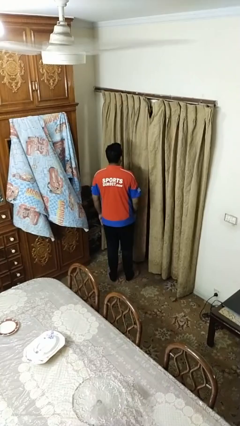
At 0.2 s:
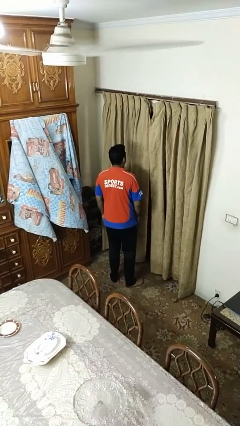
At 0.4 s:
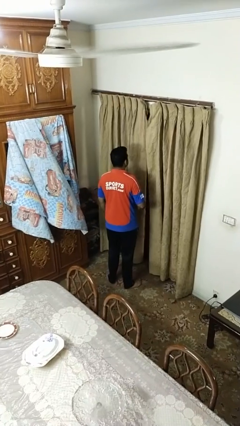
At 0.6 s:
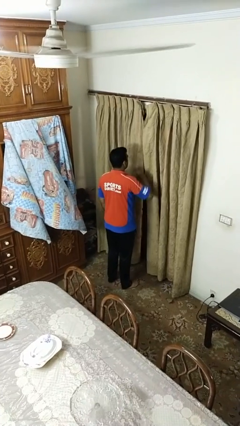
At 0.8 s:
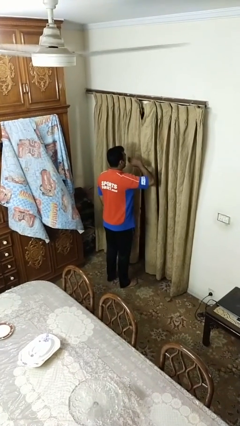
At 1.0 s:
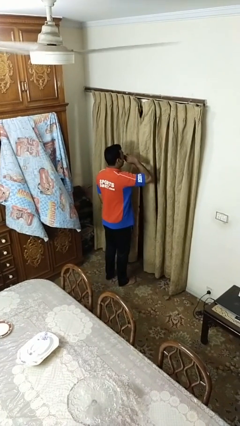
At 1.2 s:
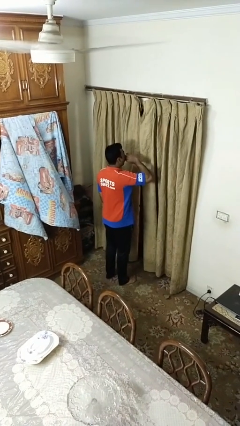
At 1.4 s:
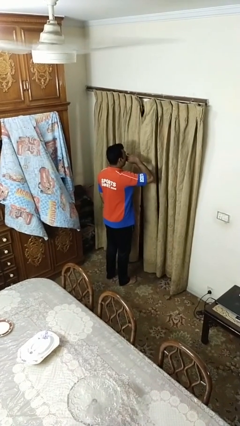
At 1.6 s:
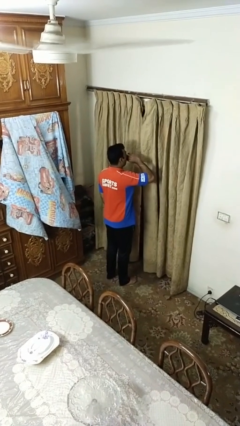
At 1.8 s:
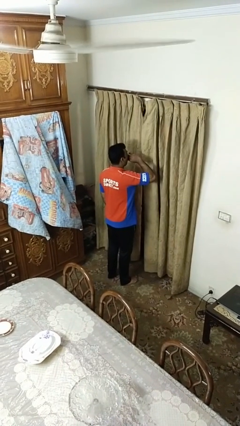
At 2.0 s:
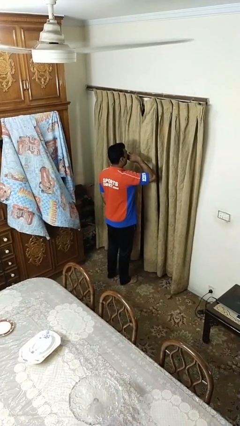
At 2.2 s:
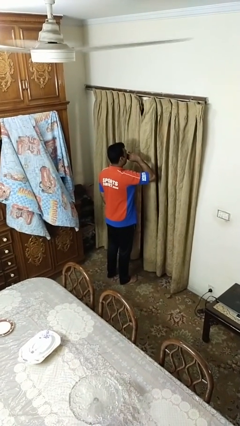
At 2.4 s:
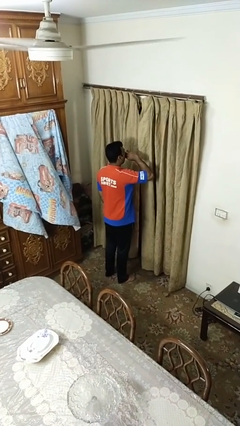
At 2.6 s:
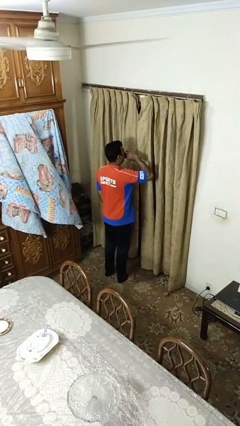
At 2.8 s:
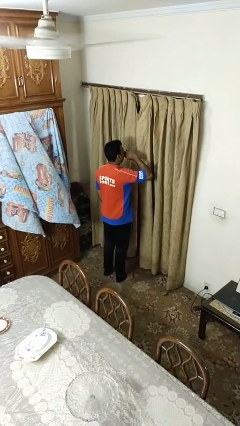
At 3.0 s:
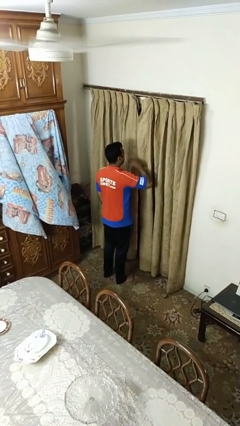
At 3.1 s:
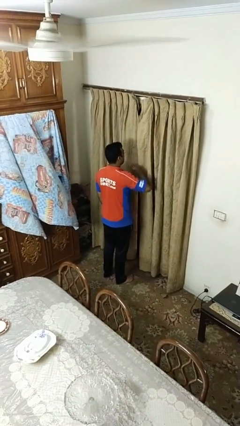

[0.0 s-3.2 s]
person yawns

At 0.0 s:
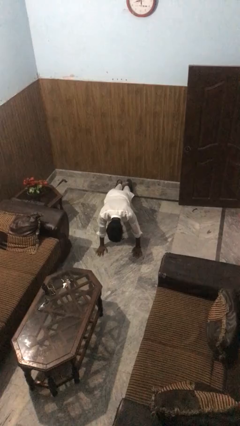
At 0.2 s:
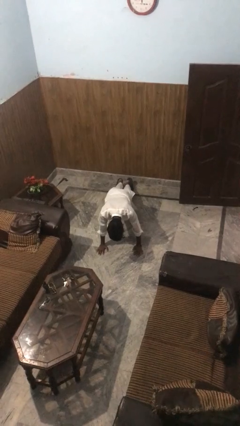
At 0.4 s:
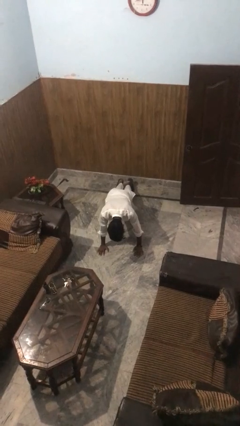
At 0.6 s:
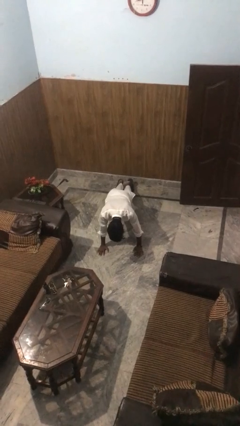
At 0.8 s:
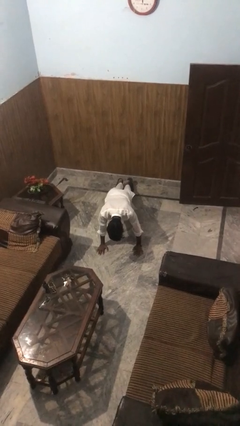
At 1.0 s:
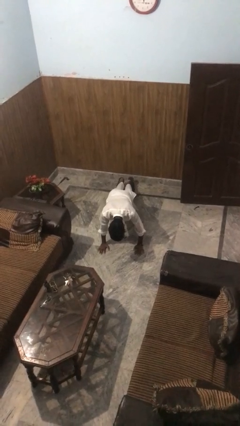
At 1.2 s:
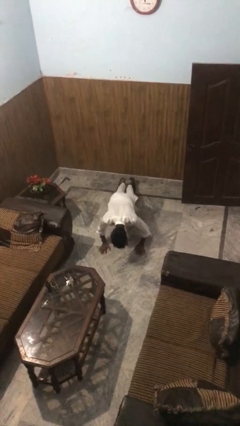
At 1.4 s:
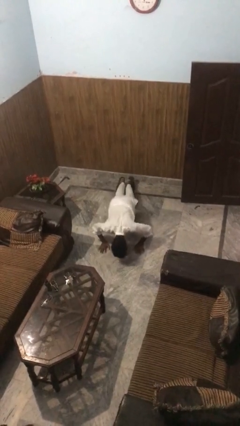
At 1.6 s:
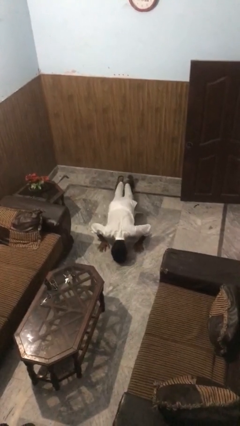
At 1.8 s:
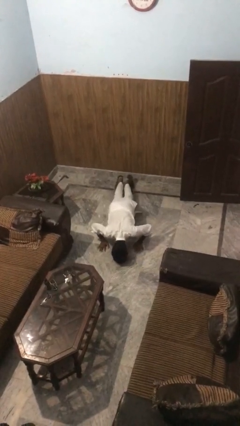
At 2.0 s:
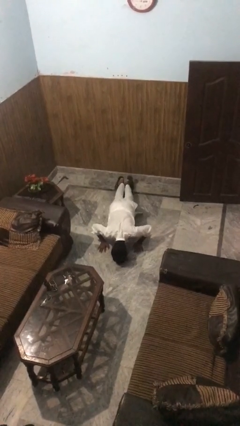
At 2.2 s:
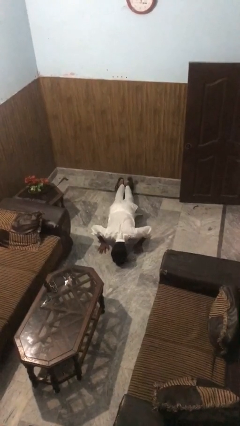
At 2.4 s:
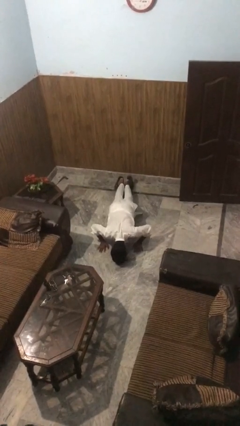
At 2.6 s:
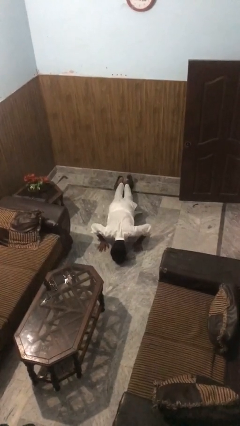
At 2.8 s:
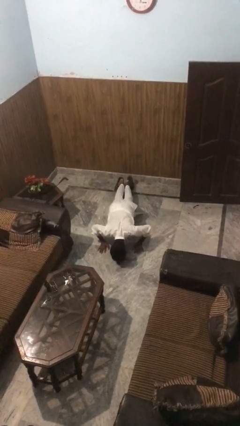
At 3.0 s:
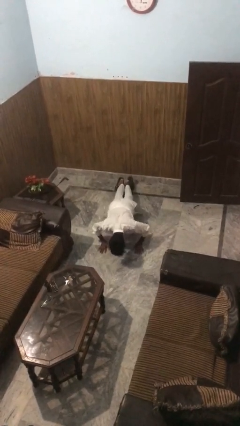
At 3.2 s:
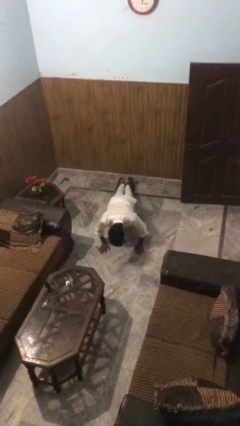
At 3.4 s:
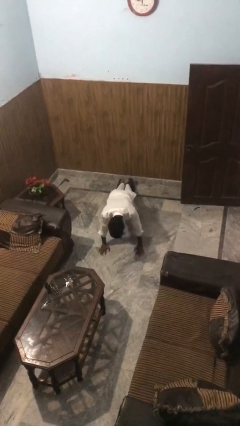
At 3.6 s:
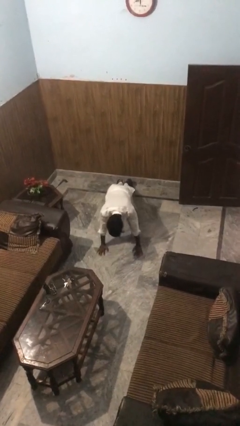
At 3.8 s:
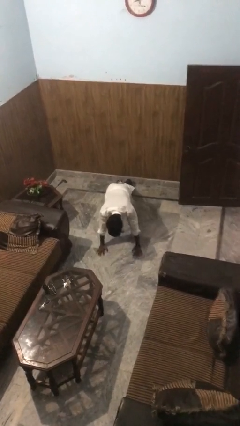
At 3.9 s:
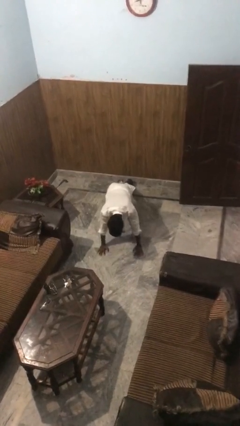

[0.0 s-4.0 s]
person exercises with pushup

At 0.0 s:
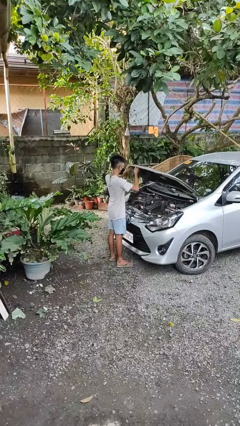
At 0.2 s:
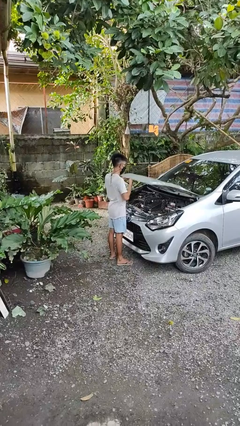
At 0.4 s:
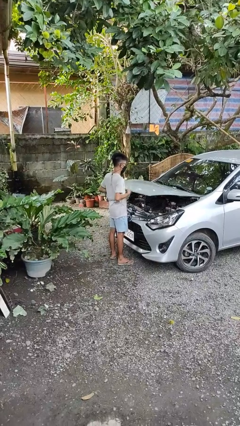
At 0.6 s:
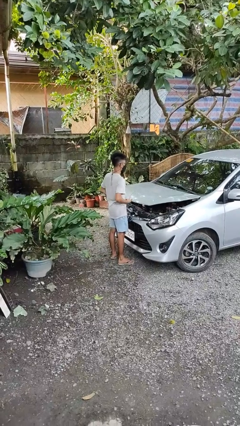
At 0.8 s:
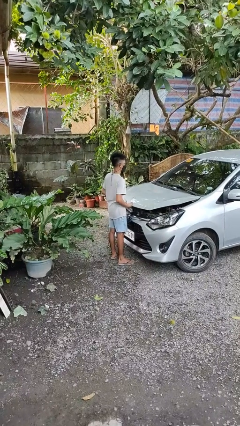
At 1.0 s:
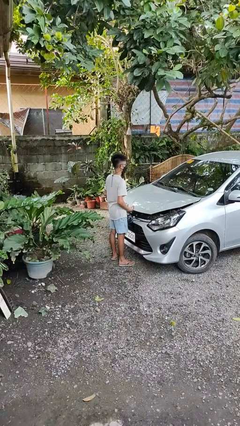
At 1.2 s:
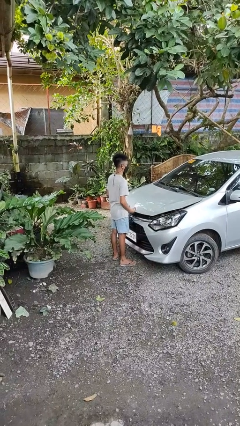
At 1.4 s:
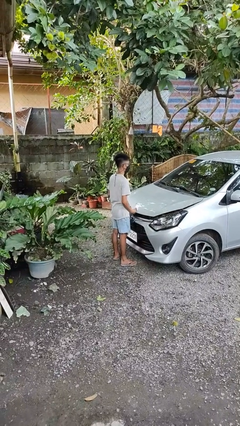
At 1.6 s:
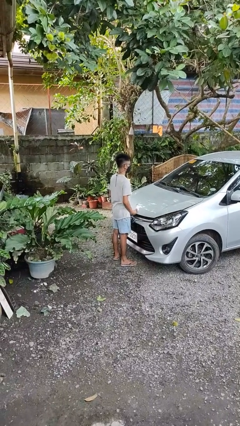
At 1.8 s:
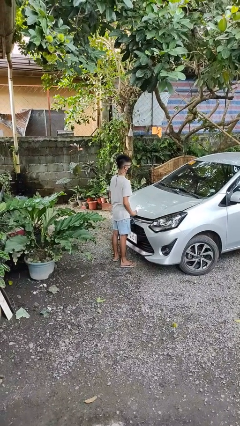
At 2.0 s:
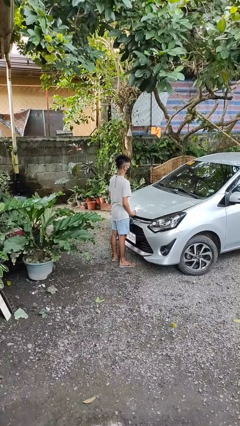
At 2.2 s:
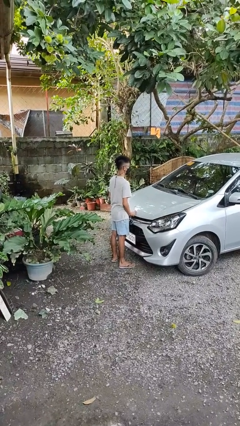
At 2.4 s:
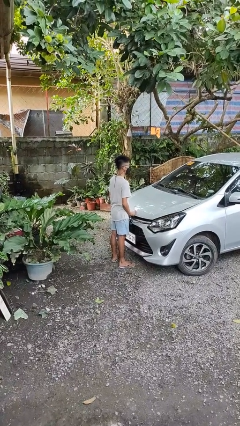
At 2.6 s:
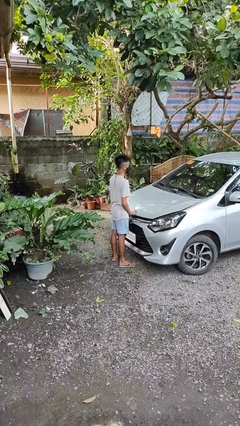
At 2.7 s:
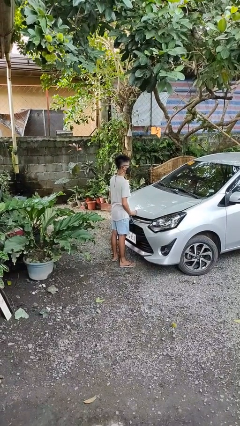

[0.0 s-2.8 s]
person closes car hood

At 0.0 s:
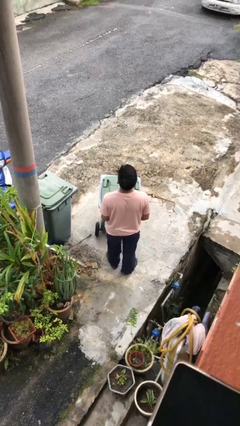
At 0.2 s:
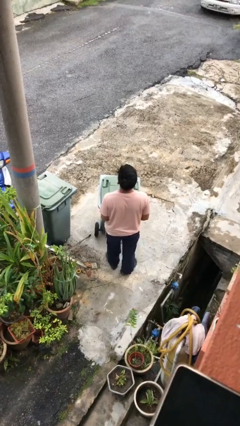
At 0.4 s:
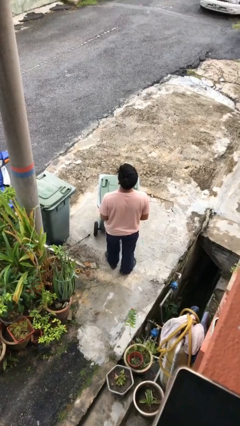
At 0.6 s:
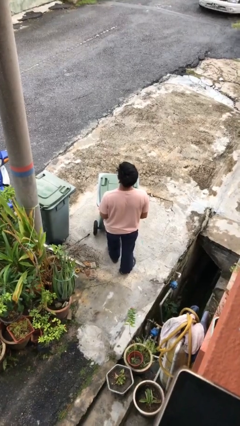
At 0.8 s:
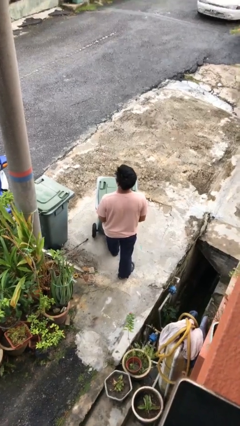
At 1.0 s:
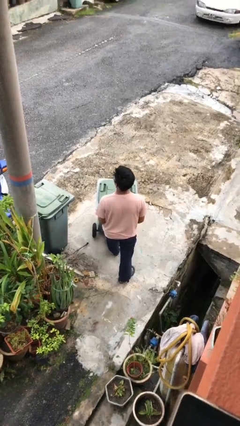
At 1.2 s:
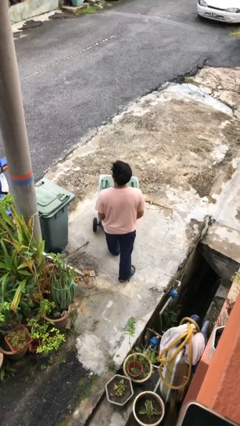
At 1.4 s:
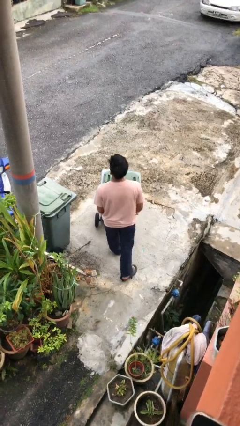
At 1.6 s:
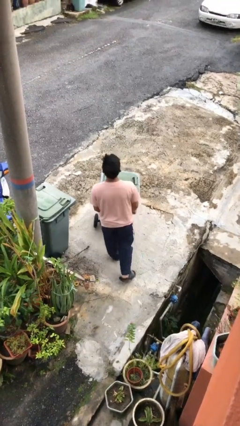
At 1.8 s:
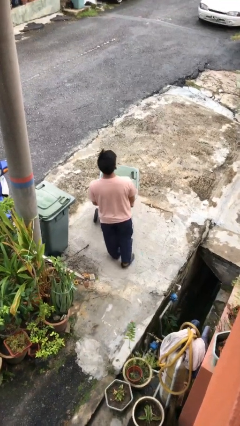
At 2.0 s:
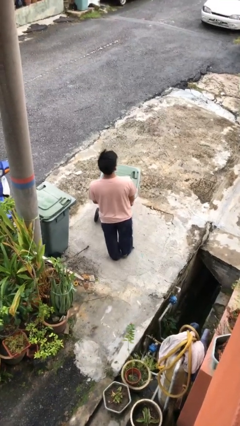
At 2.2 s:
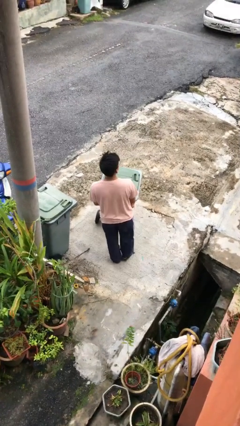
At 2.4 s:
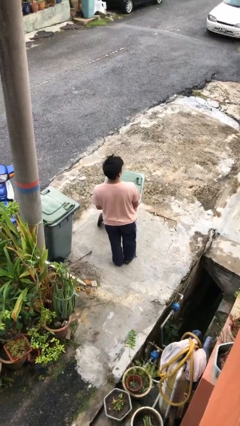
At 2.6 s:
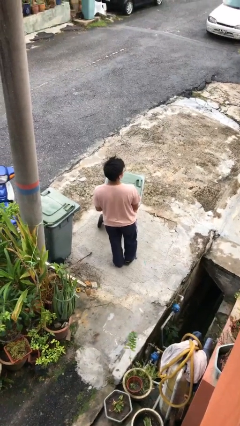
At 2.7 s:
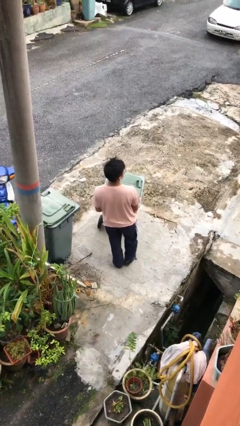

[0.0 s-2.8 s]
person pushes wheeled trashcan

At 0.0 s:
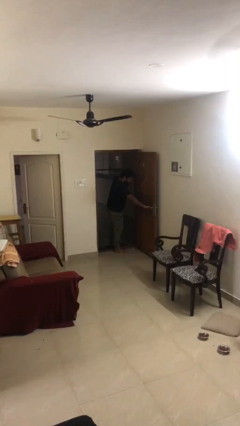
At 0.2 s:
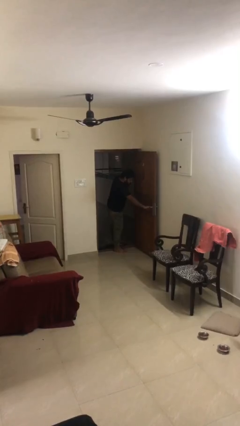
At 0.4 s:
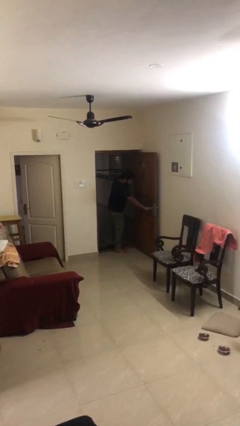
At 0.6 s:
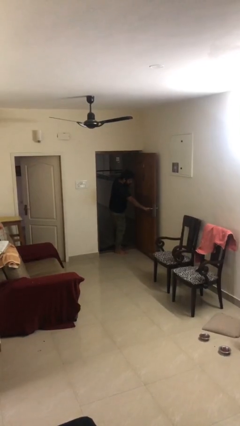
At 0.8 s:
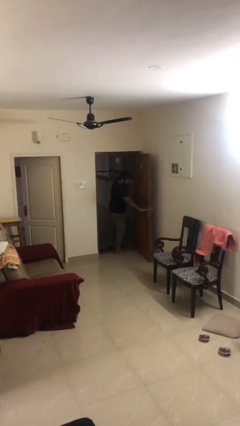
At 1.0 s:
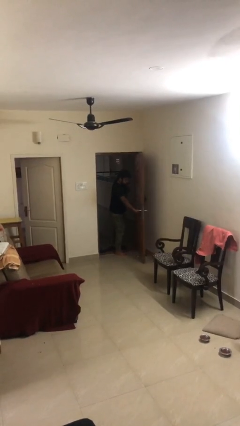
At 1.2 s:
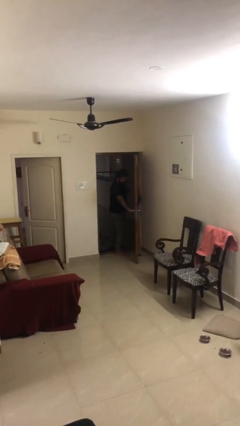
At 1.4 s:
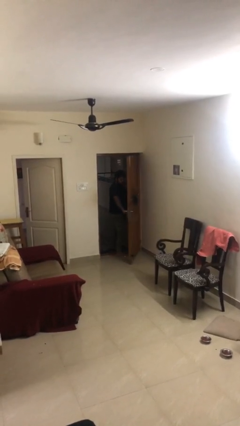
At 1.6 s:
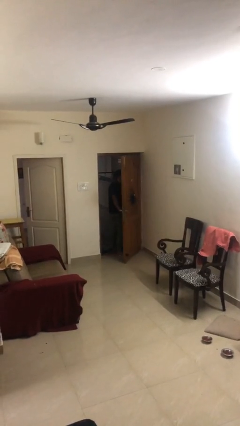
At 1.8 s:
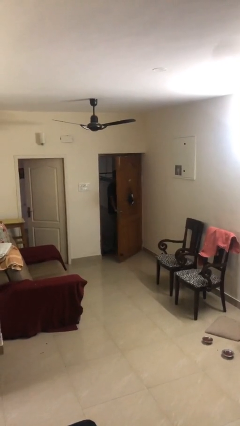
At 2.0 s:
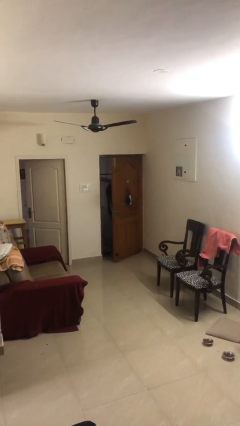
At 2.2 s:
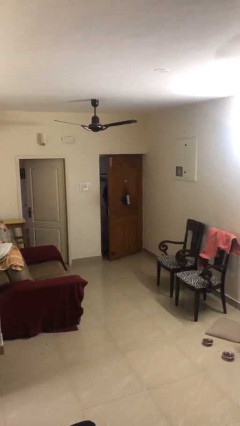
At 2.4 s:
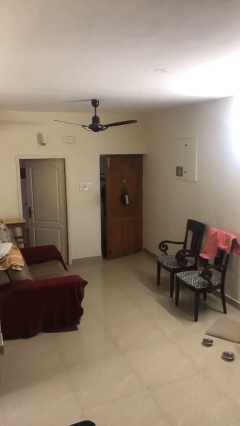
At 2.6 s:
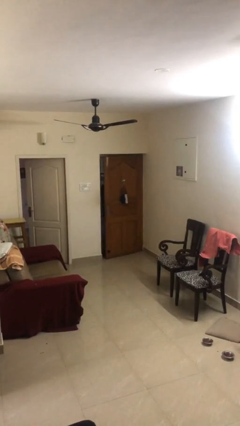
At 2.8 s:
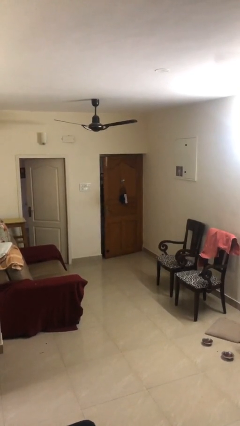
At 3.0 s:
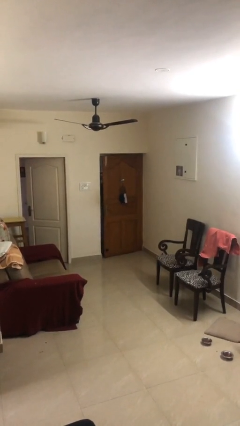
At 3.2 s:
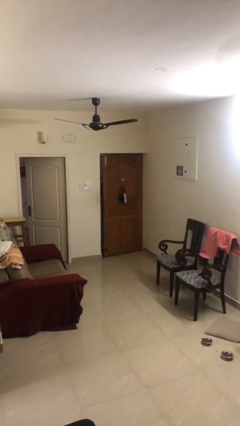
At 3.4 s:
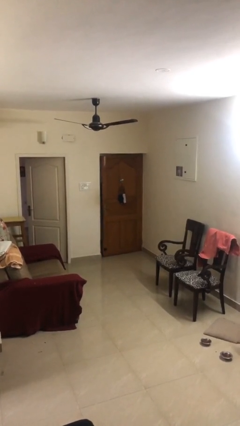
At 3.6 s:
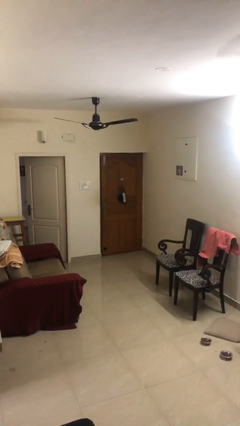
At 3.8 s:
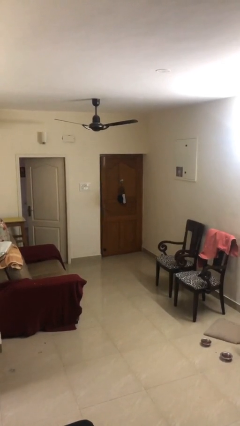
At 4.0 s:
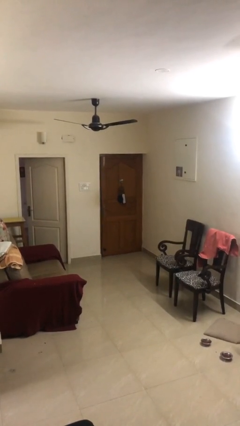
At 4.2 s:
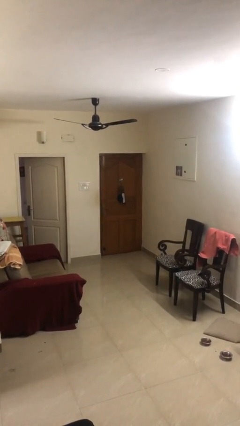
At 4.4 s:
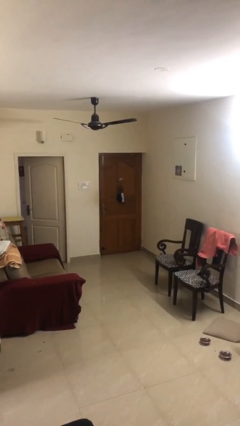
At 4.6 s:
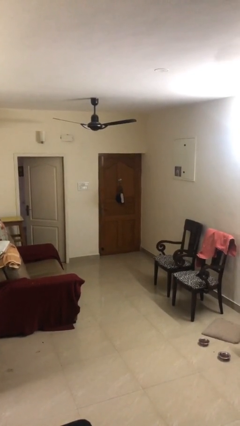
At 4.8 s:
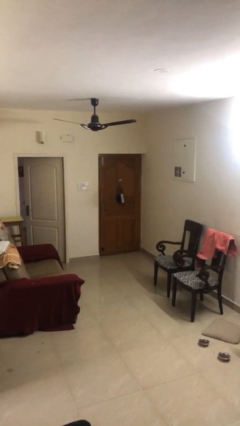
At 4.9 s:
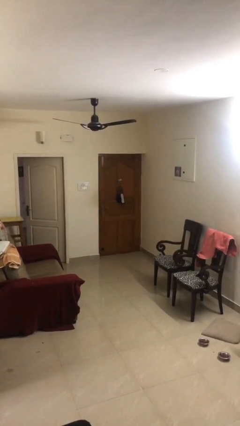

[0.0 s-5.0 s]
person closes facility door
